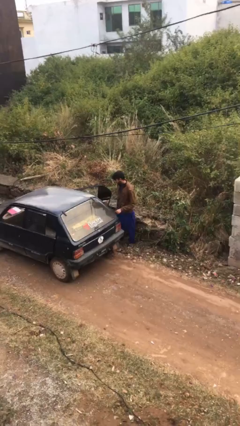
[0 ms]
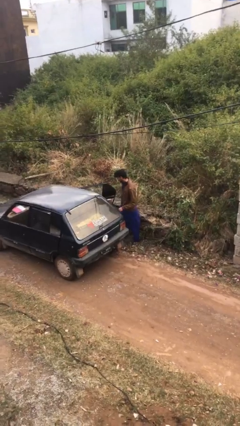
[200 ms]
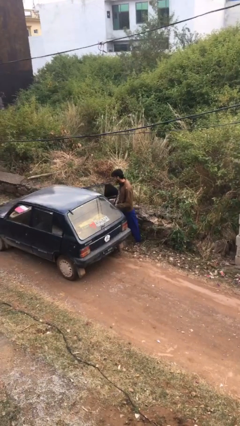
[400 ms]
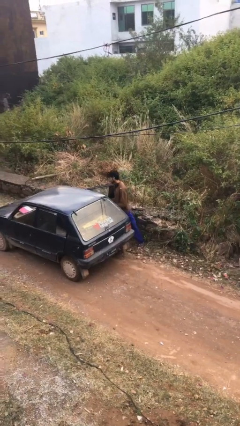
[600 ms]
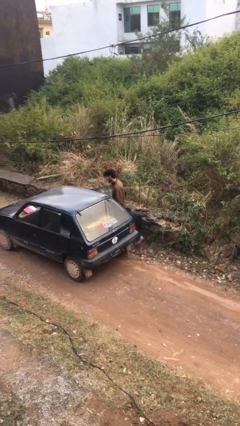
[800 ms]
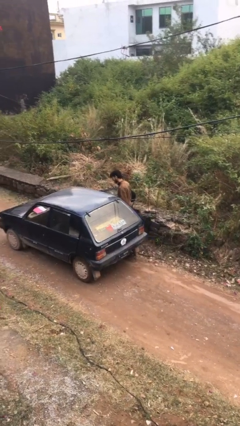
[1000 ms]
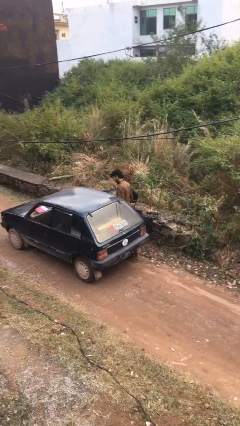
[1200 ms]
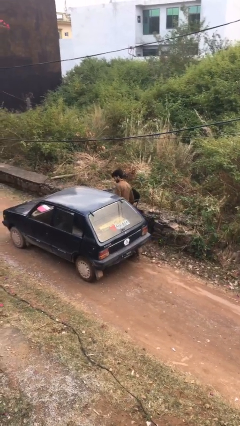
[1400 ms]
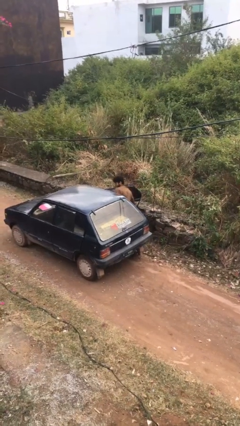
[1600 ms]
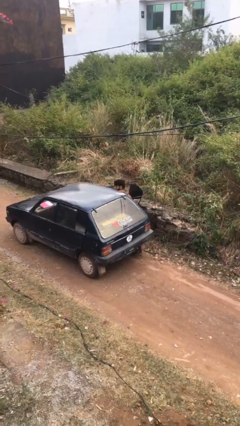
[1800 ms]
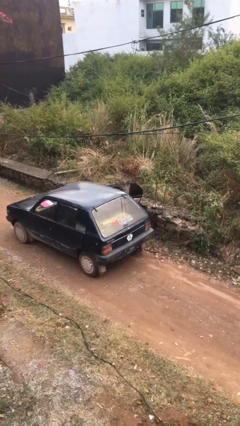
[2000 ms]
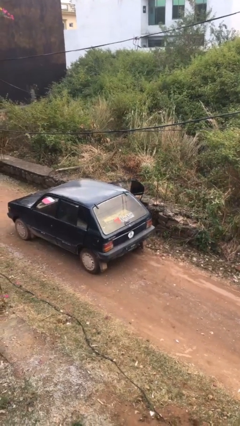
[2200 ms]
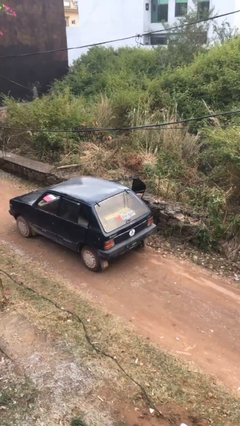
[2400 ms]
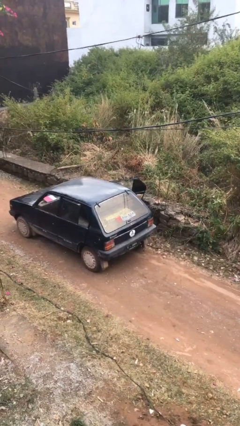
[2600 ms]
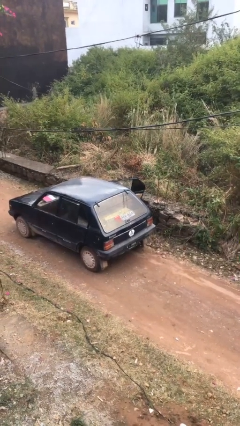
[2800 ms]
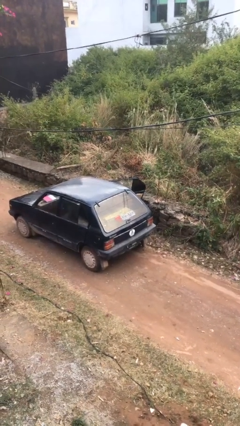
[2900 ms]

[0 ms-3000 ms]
person enters car

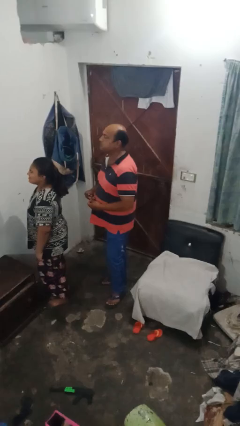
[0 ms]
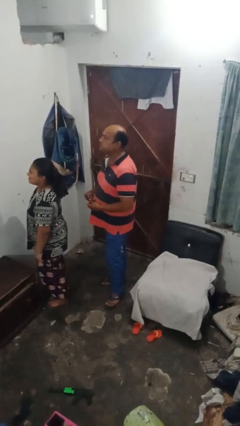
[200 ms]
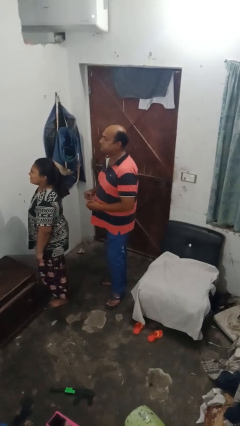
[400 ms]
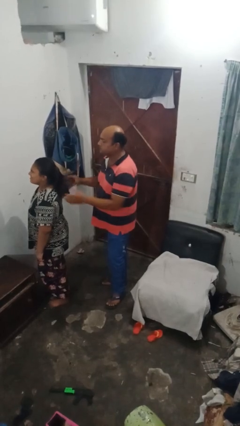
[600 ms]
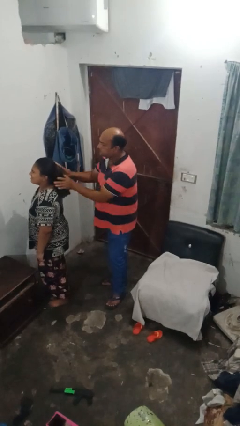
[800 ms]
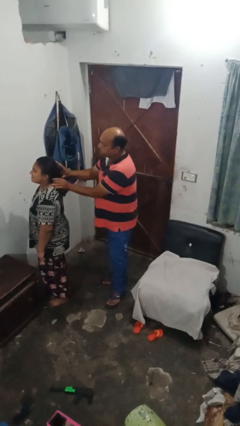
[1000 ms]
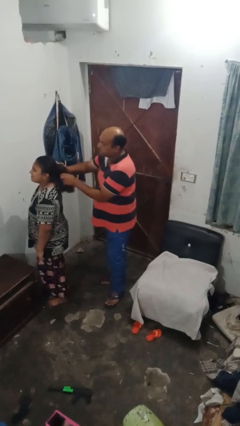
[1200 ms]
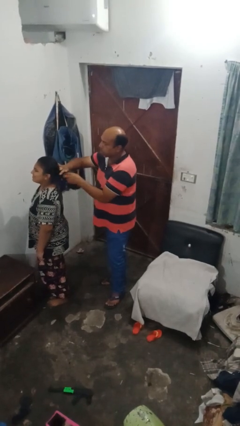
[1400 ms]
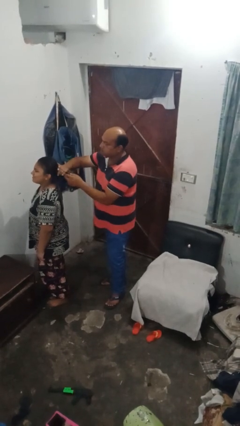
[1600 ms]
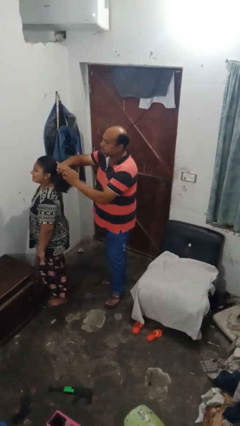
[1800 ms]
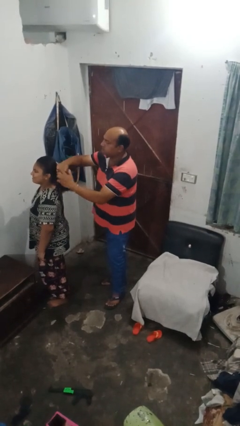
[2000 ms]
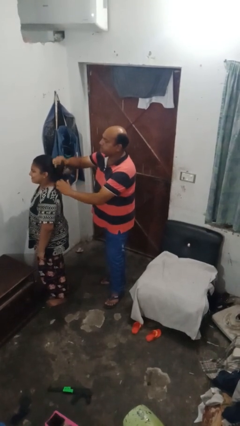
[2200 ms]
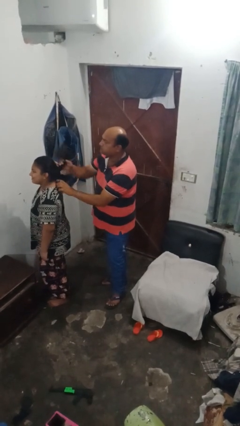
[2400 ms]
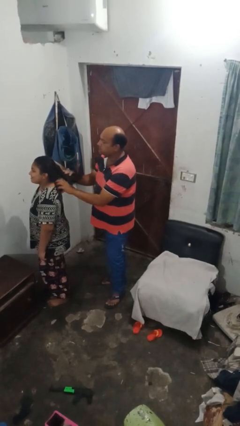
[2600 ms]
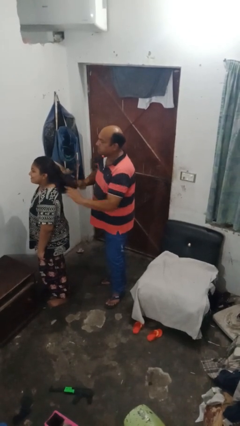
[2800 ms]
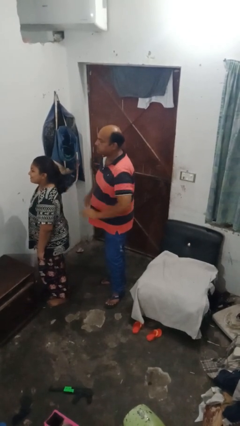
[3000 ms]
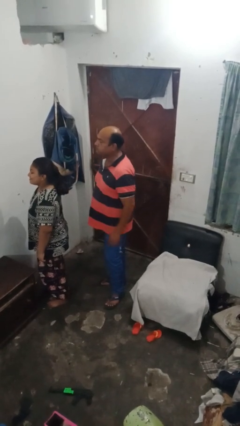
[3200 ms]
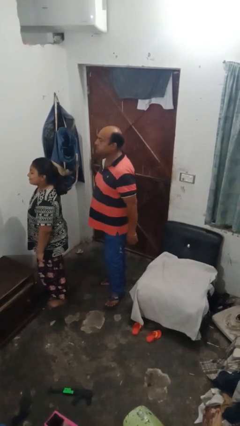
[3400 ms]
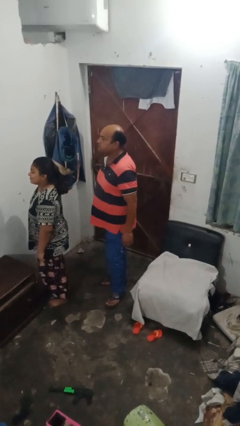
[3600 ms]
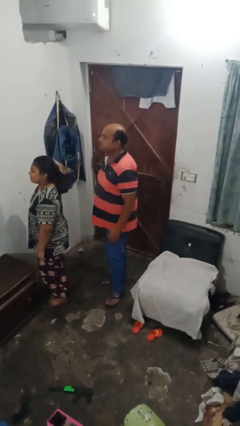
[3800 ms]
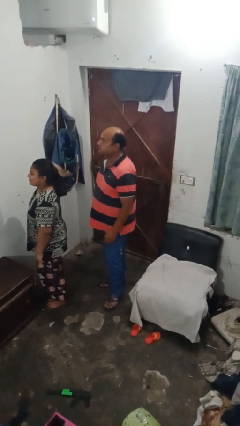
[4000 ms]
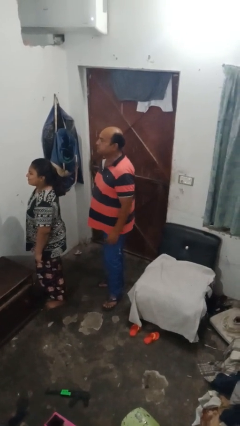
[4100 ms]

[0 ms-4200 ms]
person braids hair of person

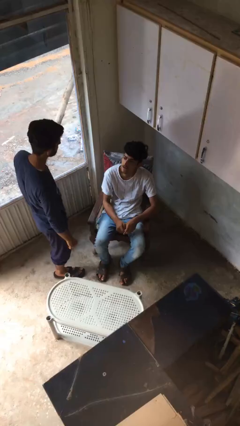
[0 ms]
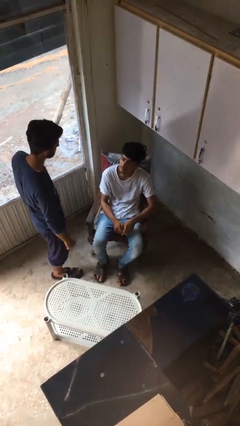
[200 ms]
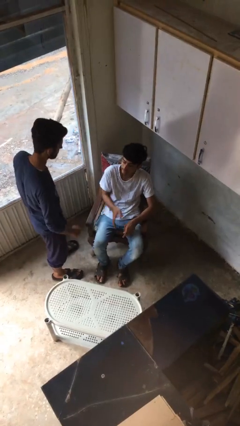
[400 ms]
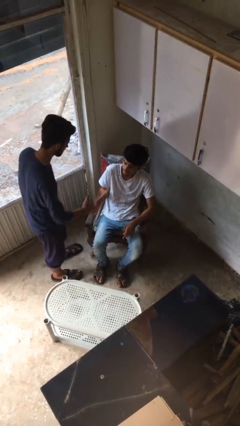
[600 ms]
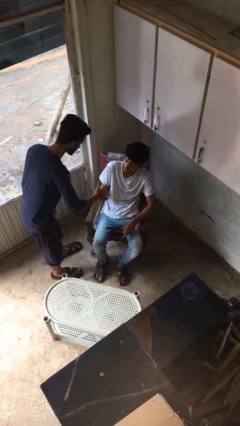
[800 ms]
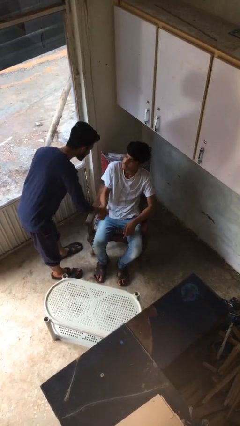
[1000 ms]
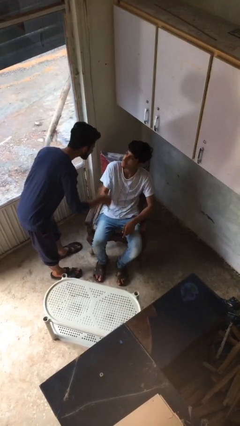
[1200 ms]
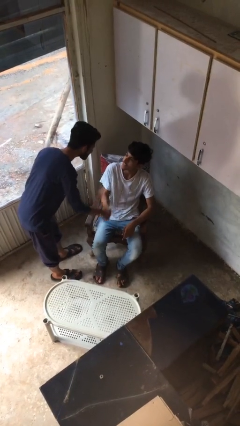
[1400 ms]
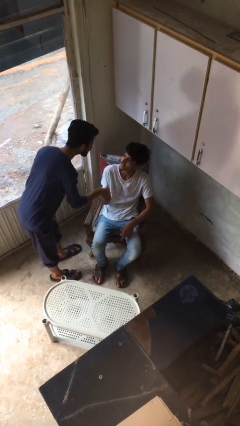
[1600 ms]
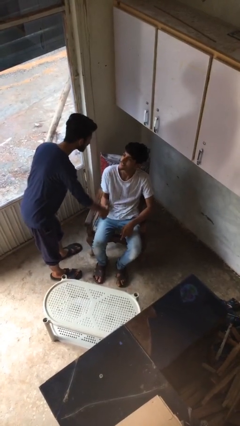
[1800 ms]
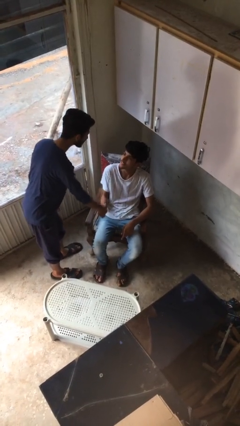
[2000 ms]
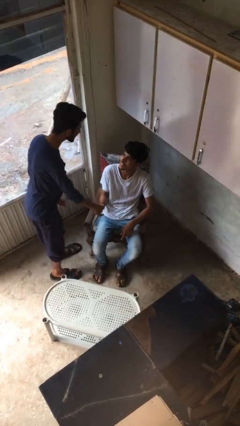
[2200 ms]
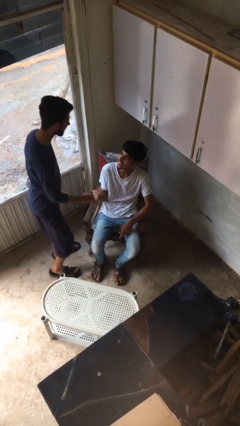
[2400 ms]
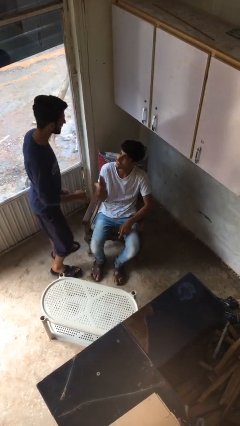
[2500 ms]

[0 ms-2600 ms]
person shakes hand

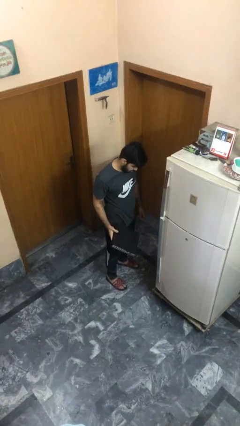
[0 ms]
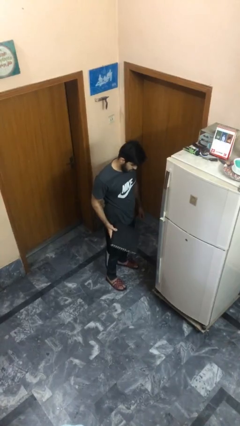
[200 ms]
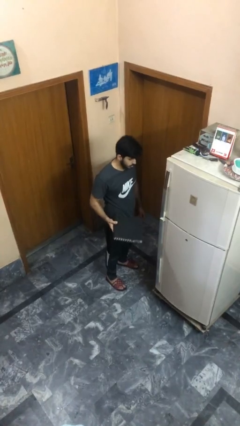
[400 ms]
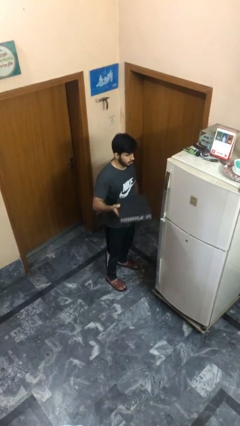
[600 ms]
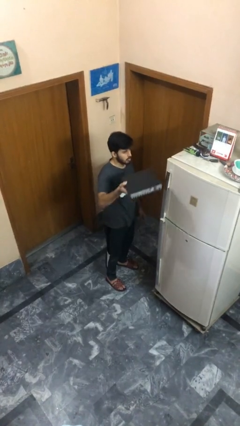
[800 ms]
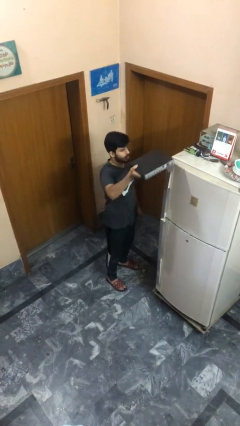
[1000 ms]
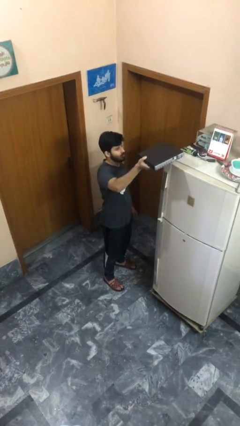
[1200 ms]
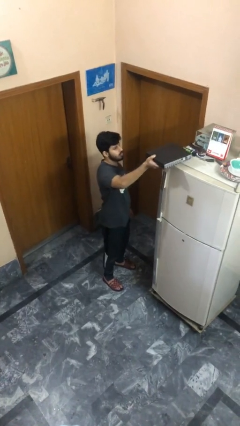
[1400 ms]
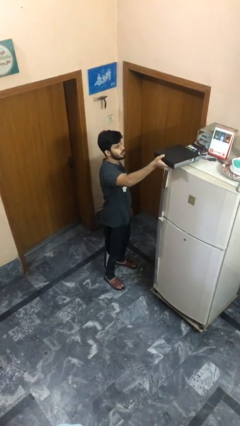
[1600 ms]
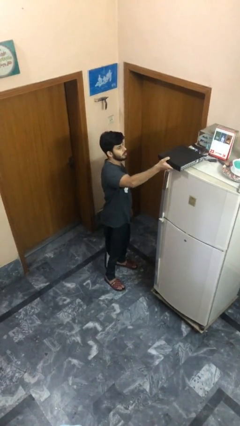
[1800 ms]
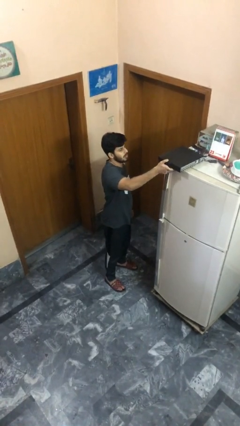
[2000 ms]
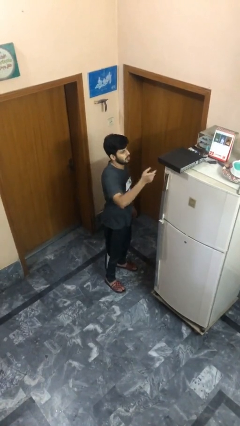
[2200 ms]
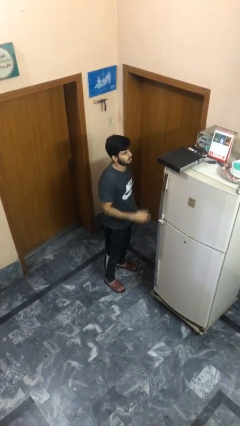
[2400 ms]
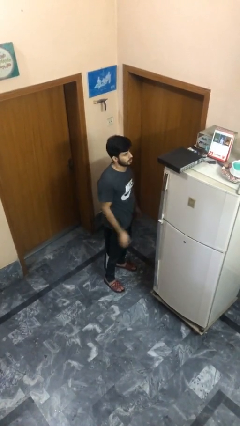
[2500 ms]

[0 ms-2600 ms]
person puts down object on countertop

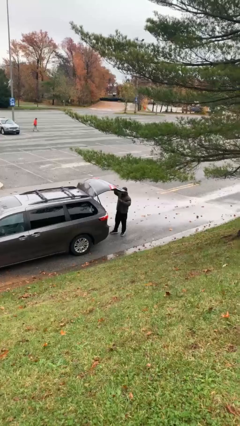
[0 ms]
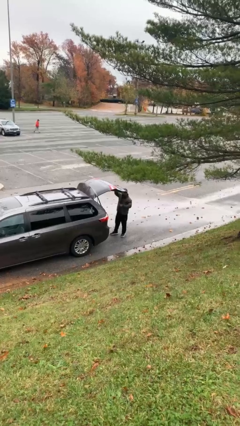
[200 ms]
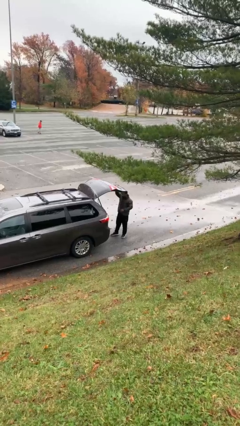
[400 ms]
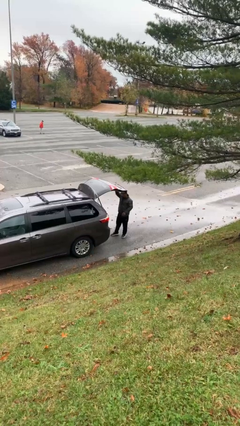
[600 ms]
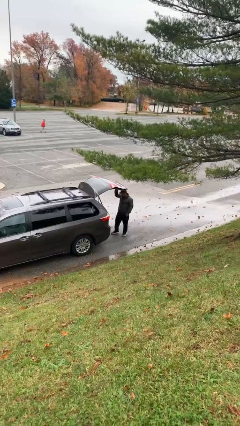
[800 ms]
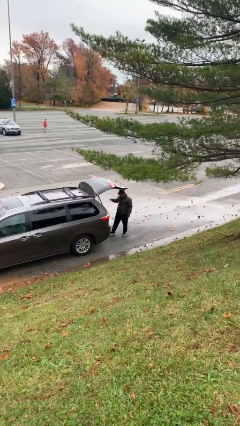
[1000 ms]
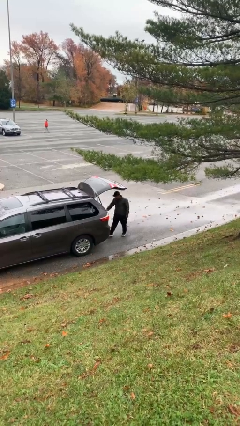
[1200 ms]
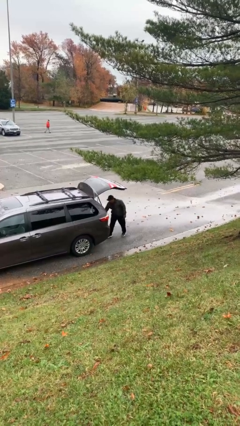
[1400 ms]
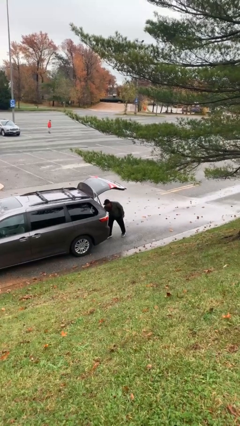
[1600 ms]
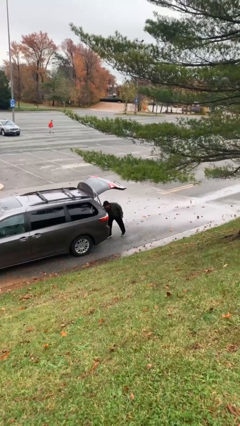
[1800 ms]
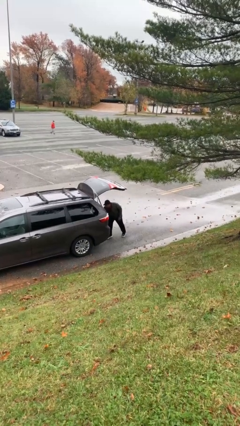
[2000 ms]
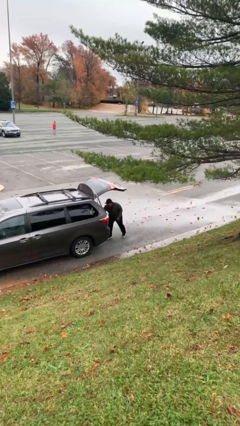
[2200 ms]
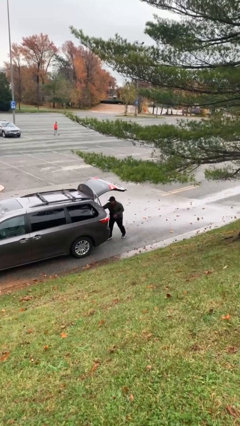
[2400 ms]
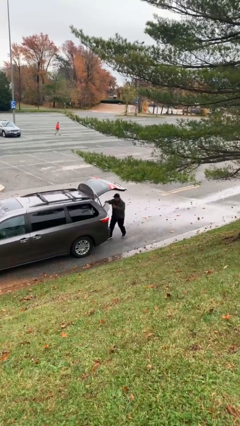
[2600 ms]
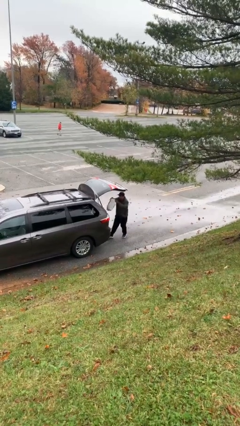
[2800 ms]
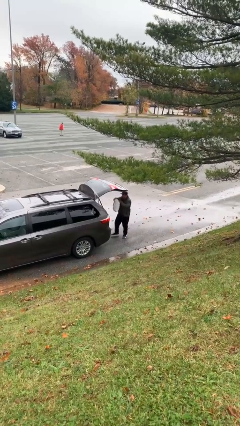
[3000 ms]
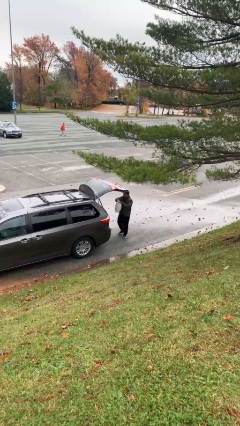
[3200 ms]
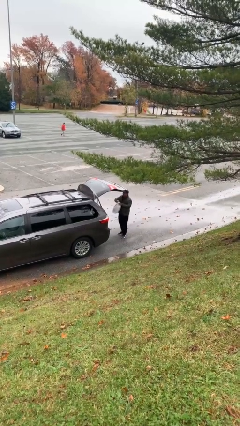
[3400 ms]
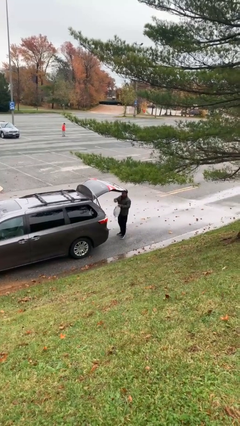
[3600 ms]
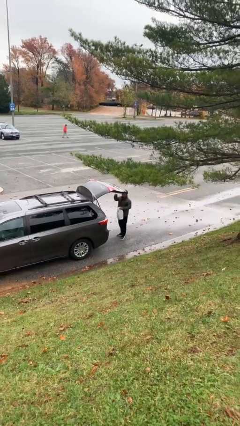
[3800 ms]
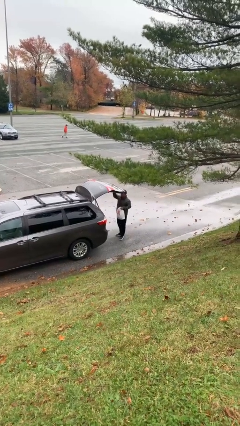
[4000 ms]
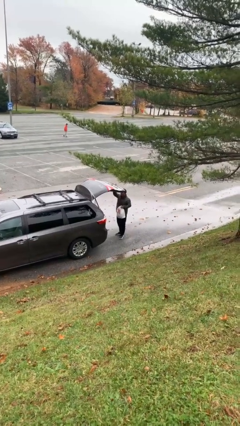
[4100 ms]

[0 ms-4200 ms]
person unloads car

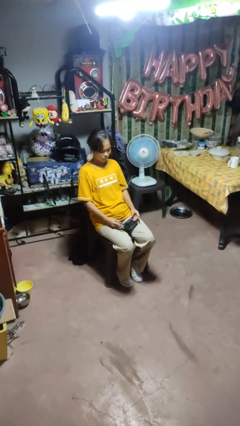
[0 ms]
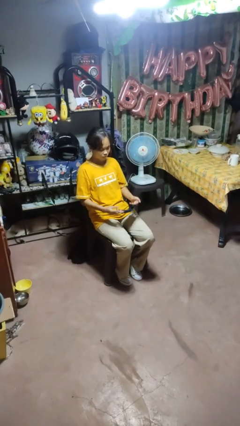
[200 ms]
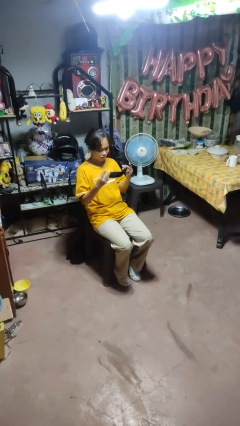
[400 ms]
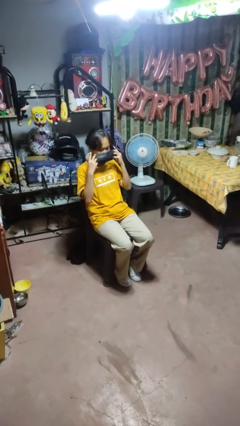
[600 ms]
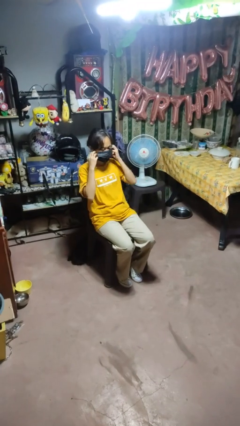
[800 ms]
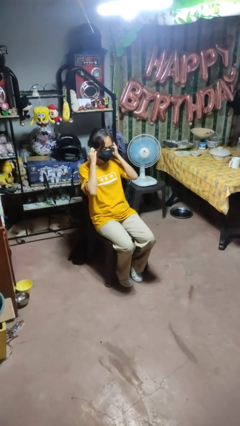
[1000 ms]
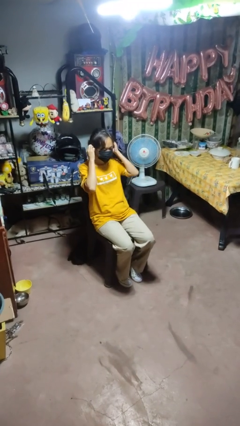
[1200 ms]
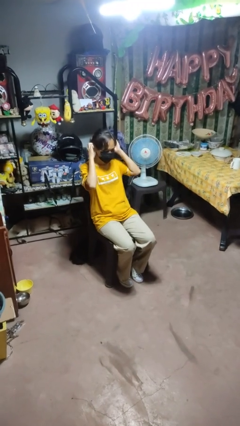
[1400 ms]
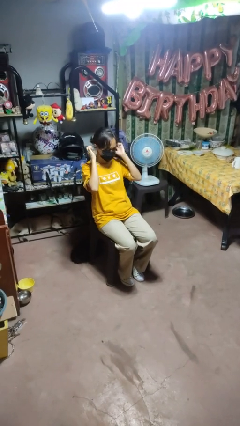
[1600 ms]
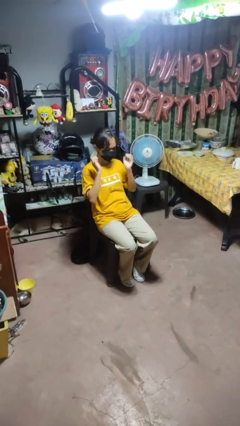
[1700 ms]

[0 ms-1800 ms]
person puts on facemask
